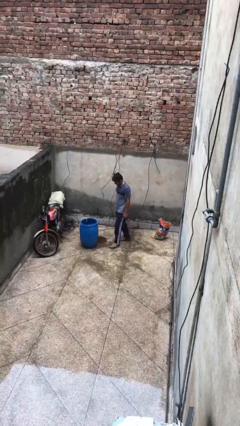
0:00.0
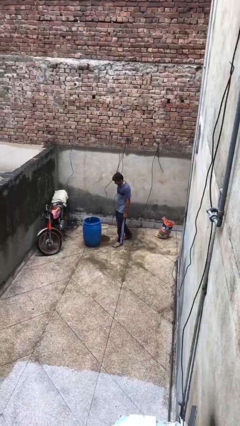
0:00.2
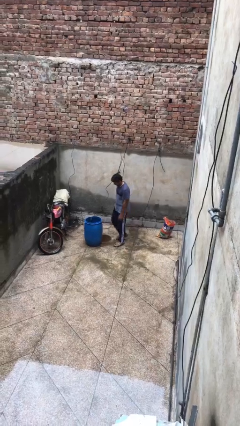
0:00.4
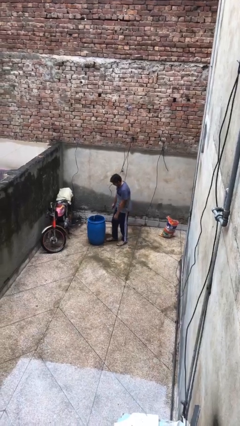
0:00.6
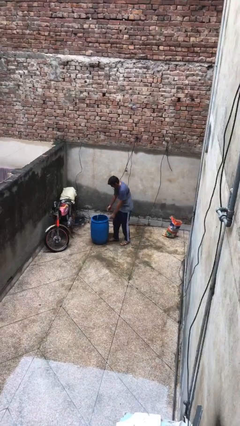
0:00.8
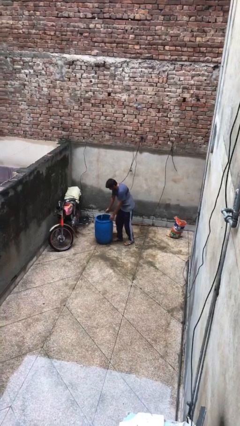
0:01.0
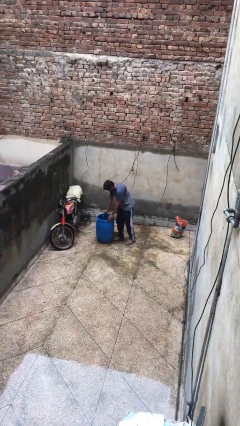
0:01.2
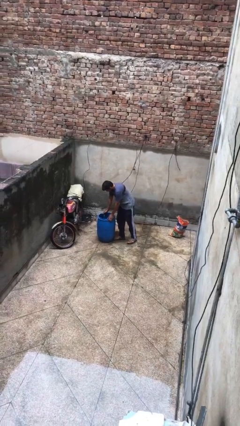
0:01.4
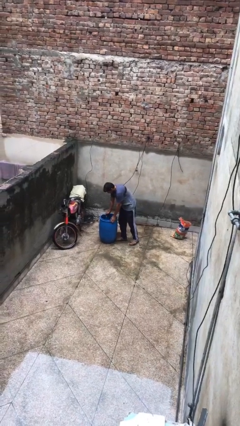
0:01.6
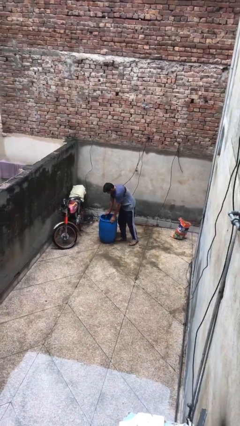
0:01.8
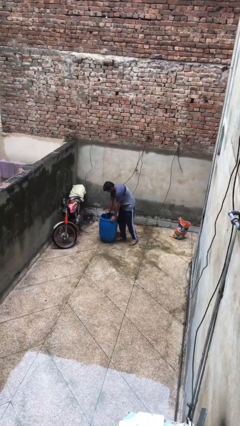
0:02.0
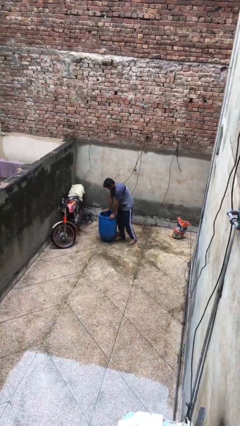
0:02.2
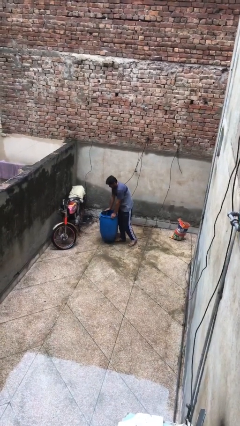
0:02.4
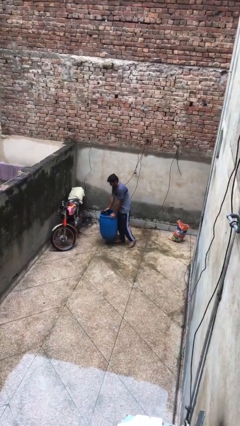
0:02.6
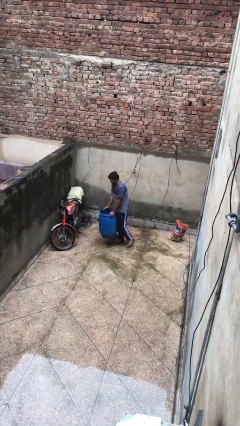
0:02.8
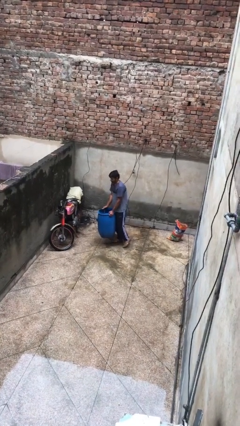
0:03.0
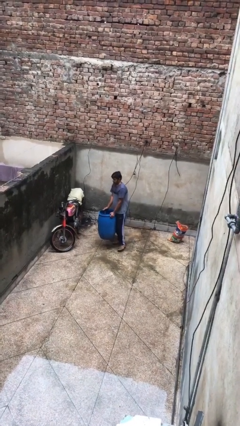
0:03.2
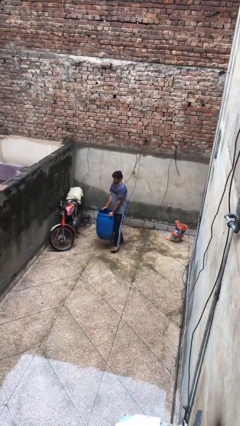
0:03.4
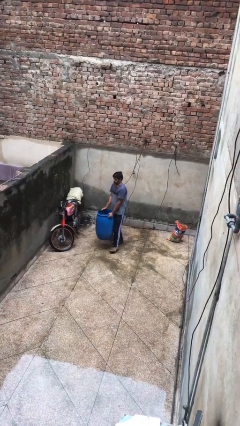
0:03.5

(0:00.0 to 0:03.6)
person picks up object from floor

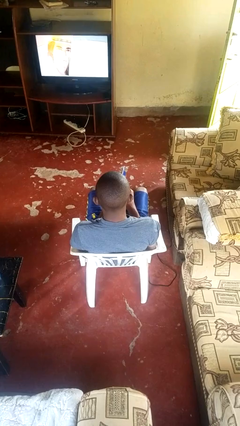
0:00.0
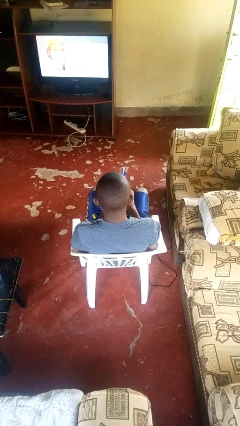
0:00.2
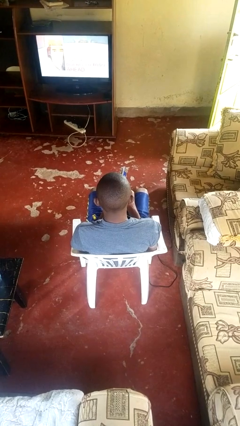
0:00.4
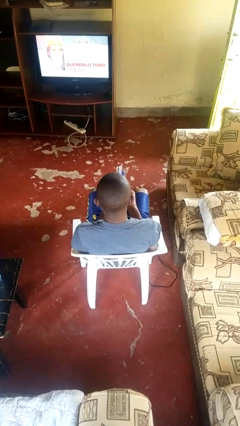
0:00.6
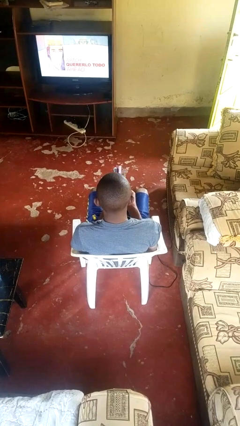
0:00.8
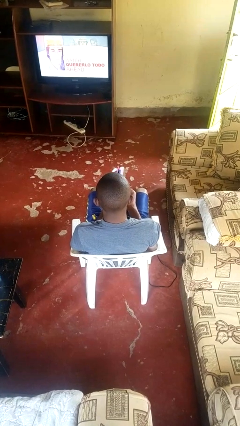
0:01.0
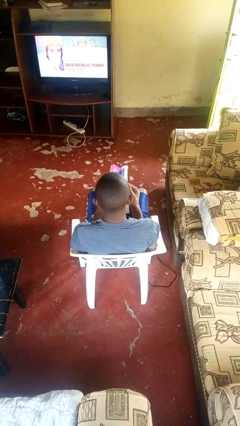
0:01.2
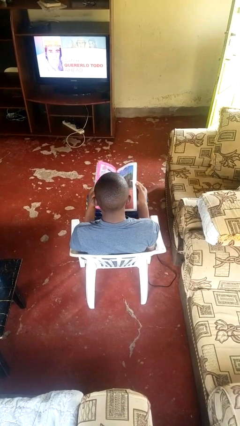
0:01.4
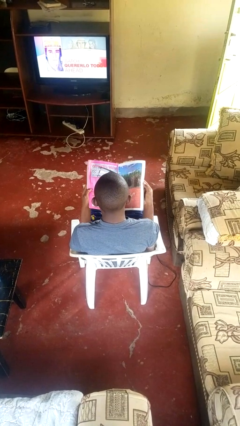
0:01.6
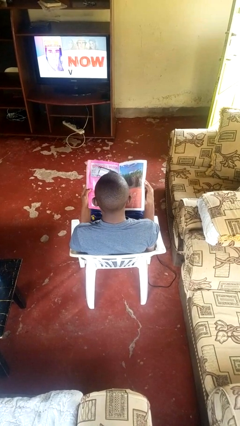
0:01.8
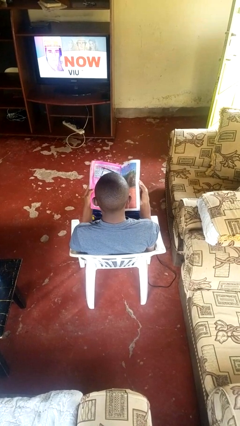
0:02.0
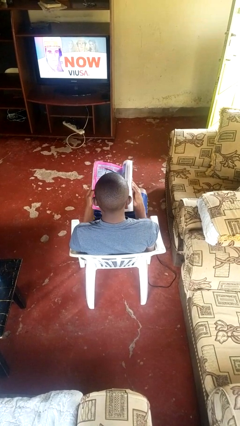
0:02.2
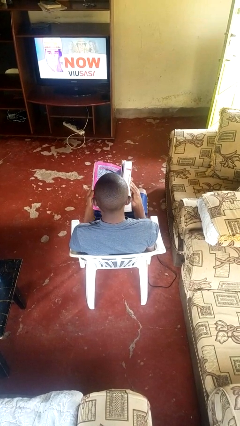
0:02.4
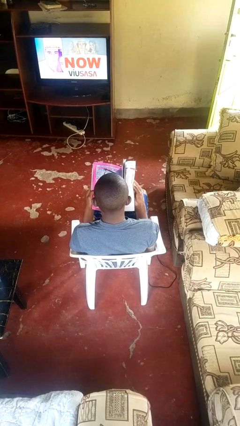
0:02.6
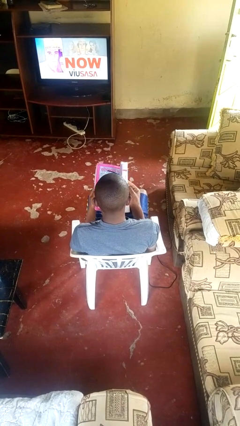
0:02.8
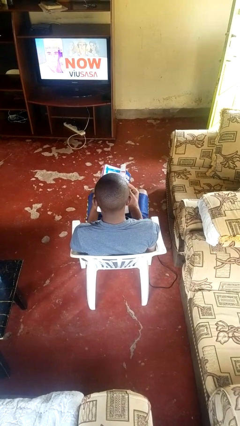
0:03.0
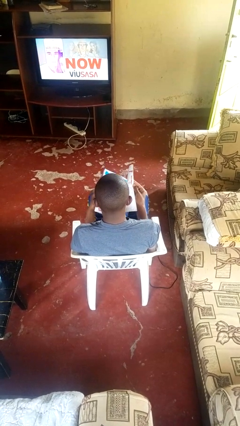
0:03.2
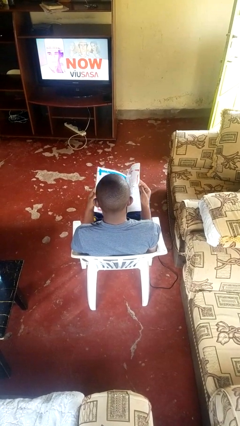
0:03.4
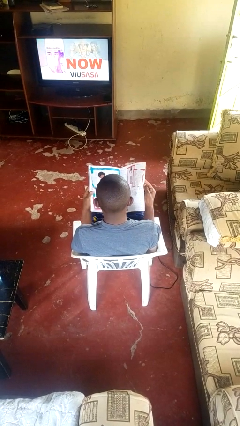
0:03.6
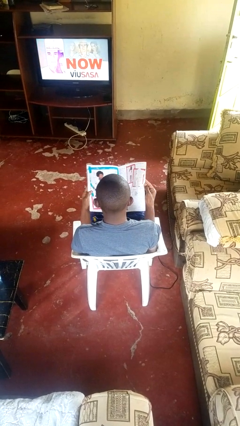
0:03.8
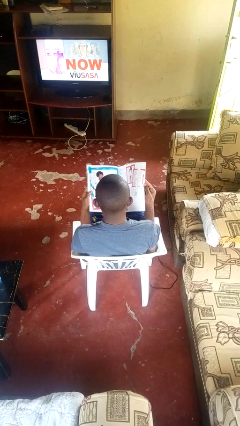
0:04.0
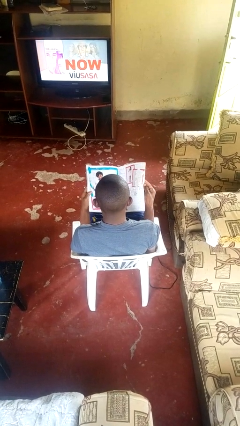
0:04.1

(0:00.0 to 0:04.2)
person reads magazine

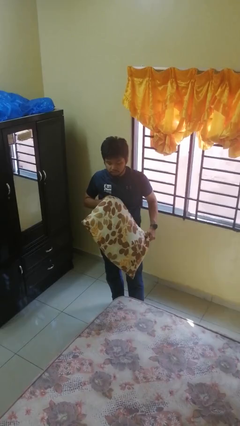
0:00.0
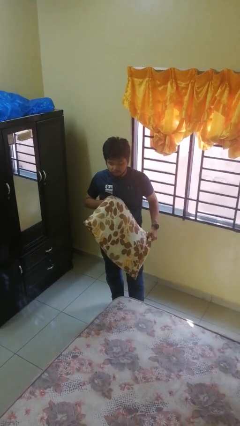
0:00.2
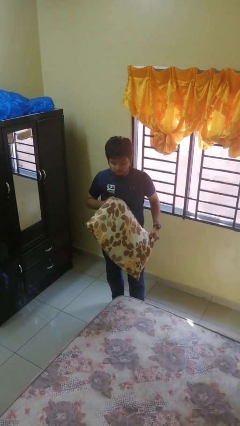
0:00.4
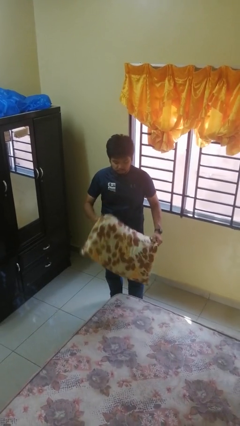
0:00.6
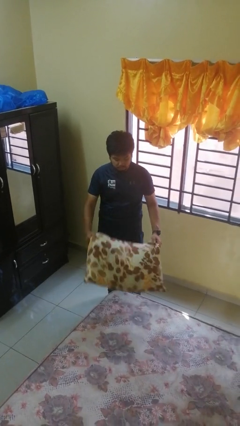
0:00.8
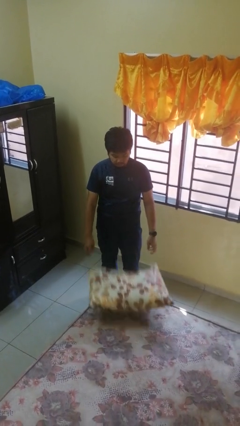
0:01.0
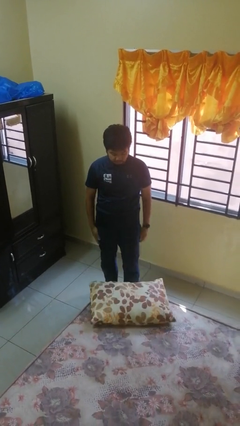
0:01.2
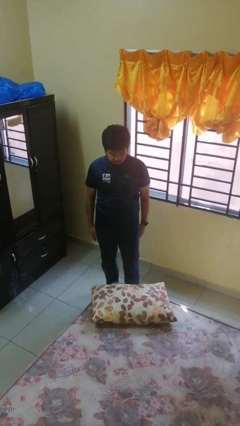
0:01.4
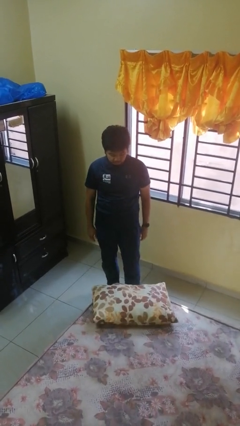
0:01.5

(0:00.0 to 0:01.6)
person puts down object on bed

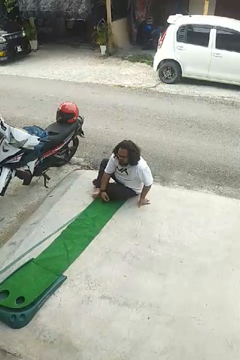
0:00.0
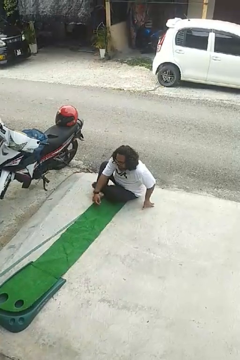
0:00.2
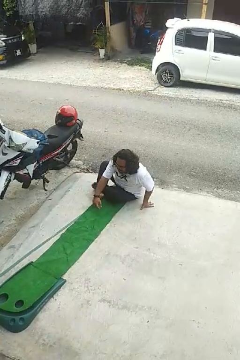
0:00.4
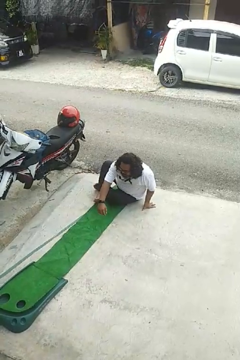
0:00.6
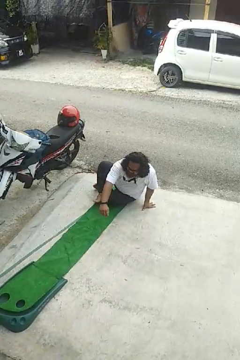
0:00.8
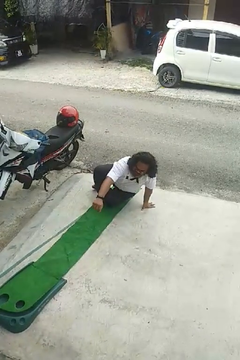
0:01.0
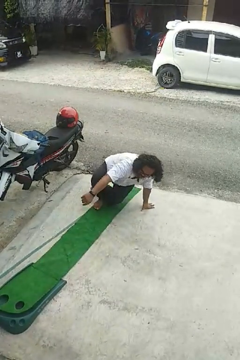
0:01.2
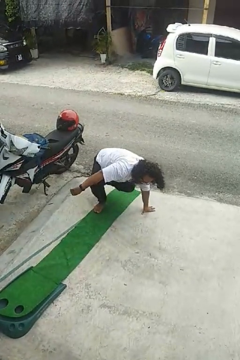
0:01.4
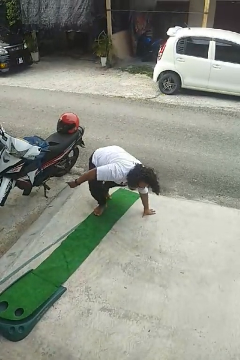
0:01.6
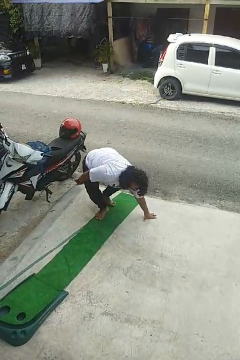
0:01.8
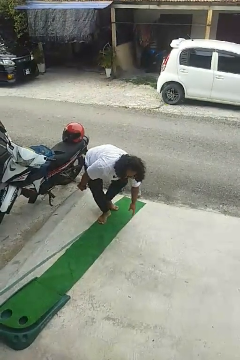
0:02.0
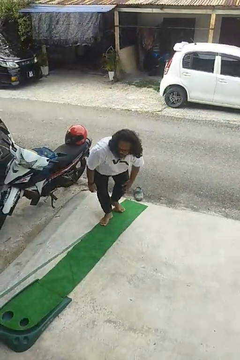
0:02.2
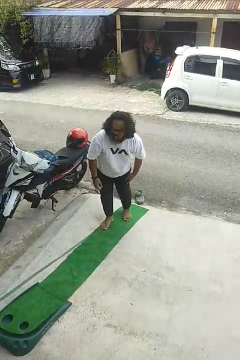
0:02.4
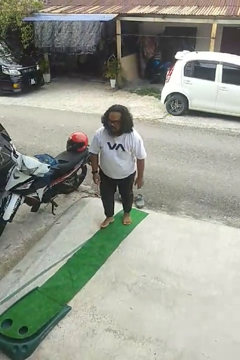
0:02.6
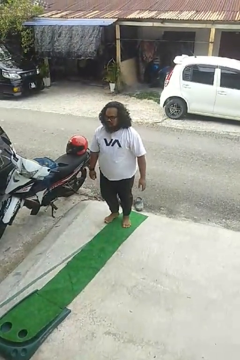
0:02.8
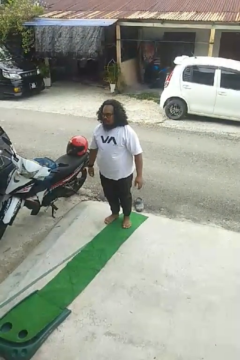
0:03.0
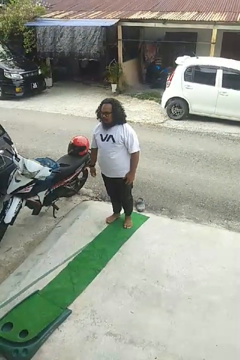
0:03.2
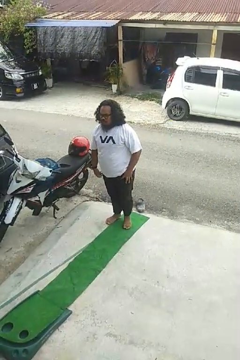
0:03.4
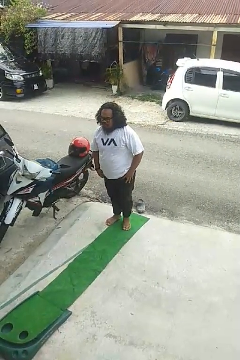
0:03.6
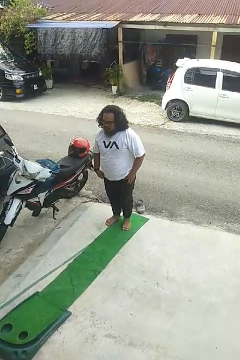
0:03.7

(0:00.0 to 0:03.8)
person stands up from floor

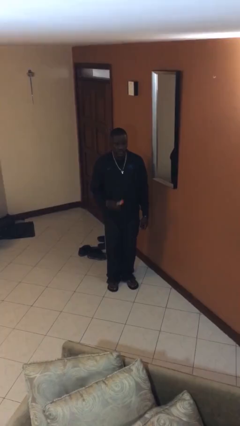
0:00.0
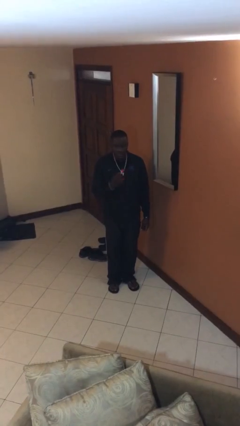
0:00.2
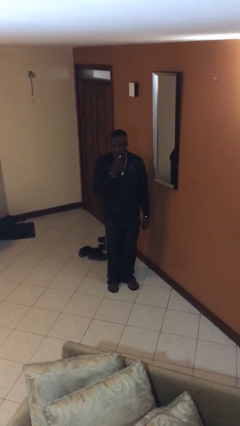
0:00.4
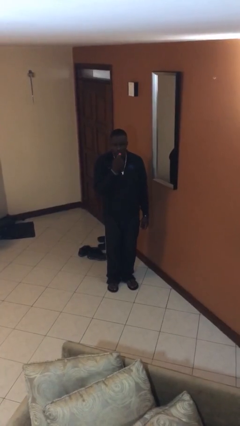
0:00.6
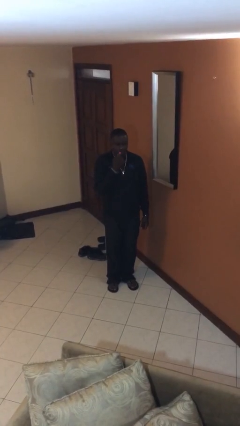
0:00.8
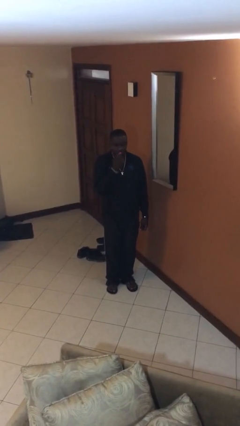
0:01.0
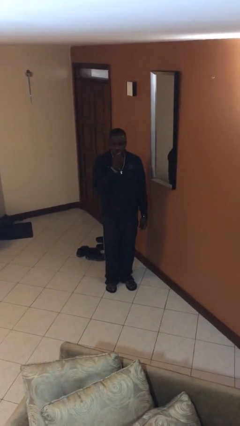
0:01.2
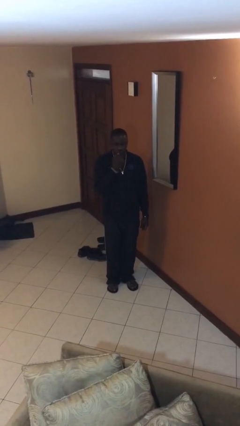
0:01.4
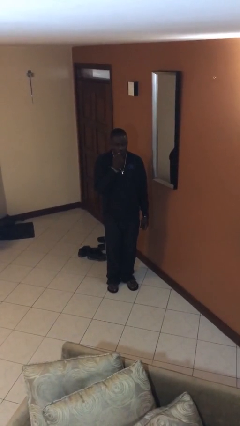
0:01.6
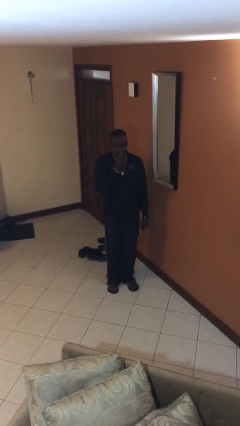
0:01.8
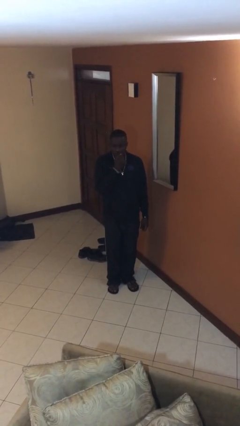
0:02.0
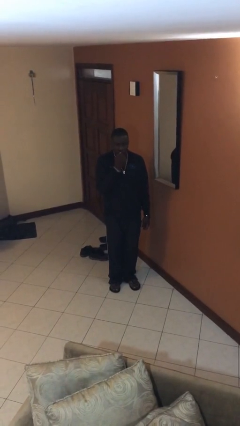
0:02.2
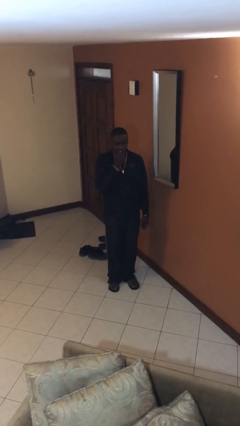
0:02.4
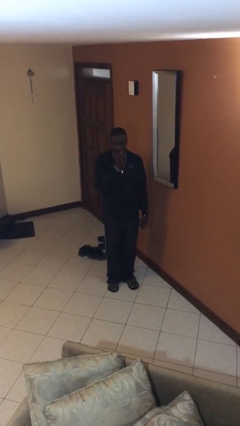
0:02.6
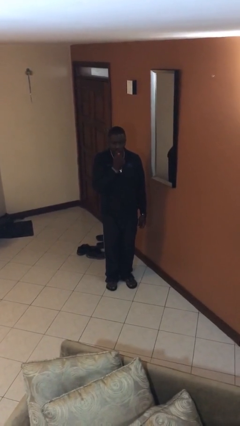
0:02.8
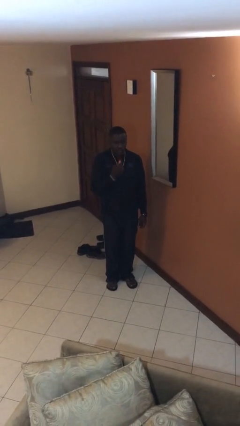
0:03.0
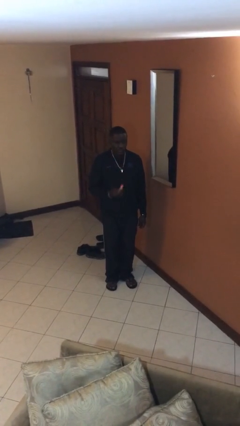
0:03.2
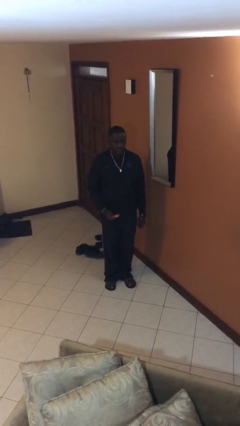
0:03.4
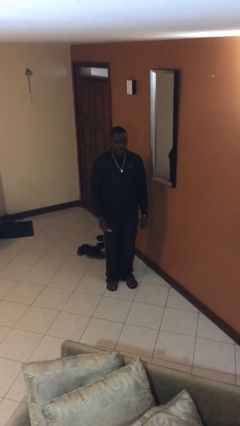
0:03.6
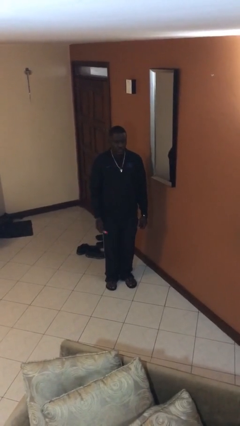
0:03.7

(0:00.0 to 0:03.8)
person applies lip makeup

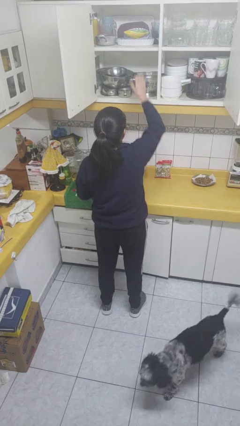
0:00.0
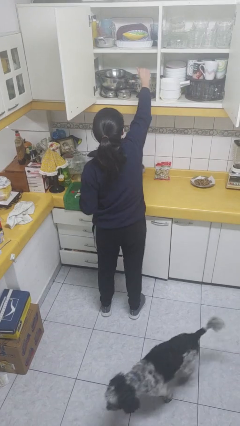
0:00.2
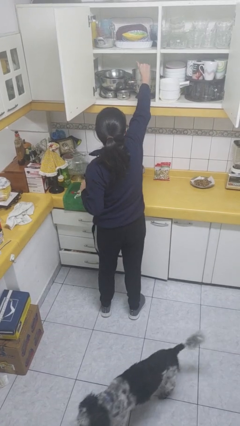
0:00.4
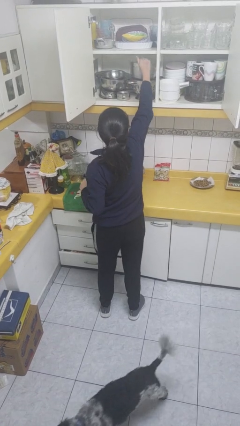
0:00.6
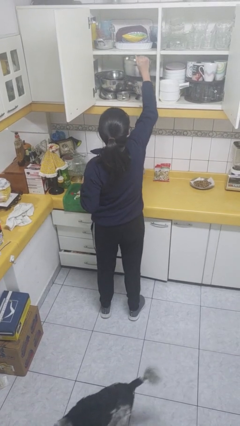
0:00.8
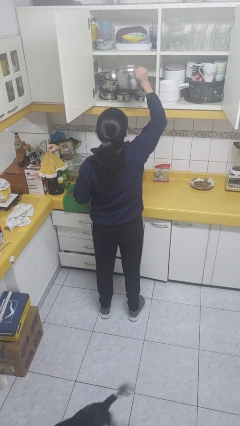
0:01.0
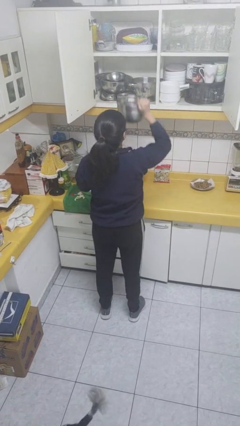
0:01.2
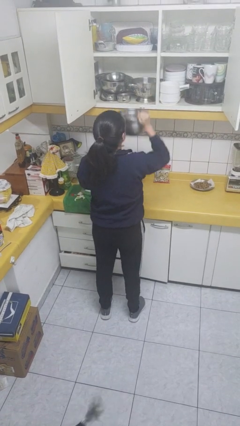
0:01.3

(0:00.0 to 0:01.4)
person picks up object from cabinet
